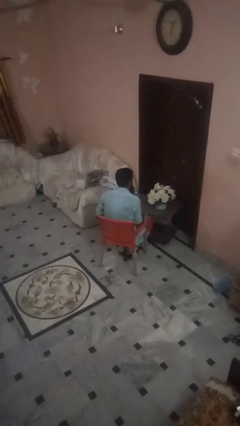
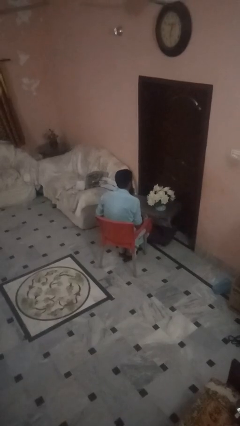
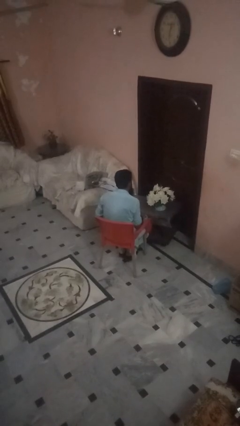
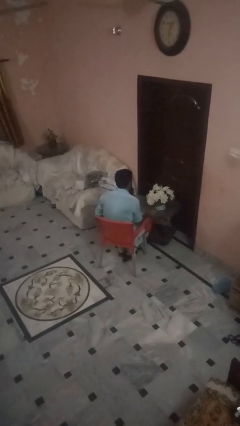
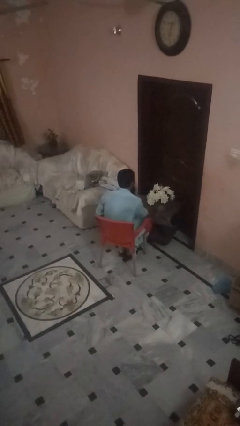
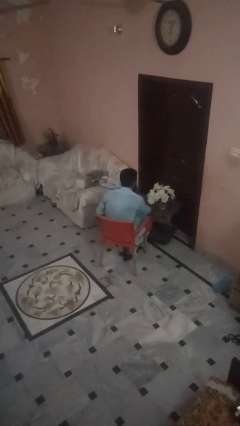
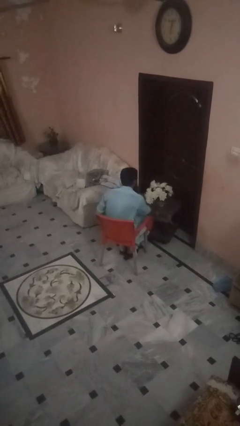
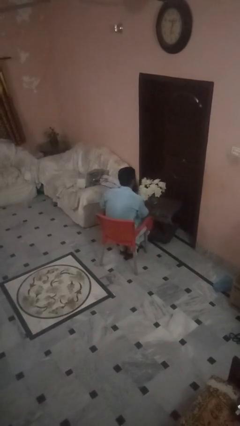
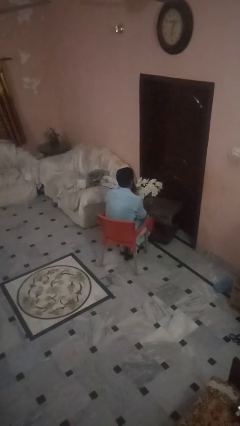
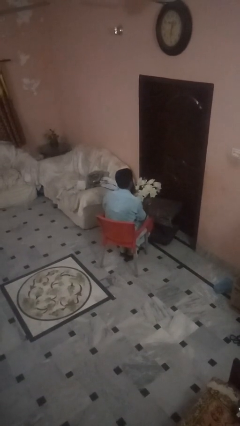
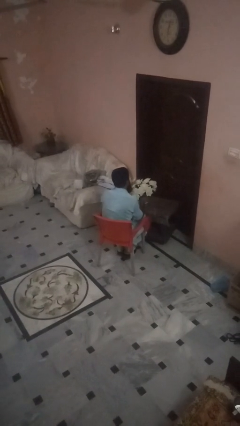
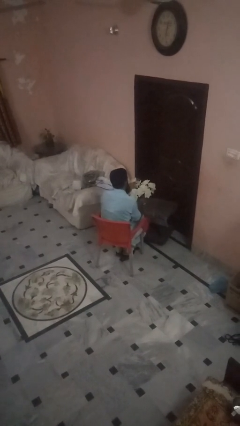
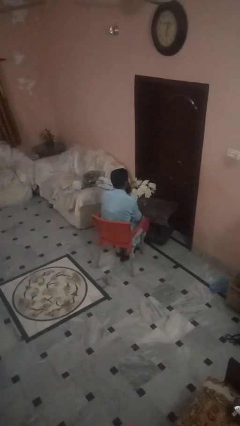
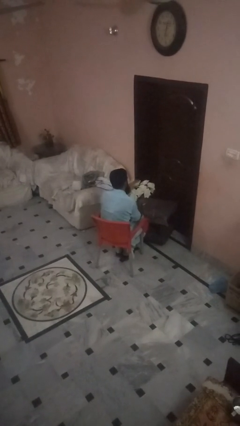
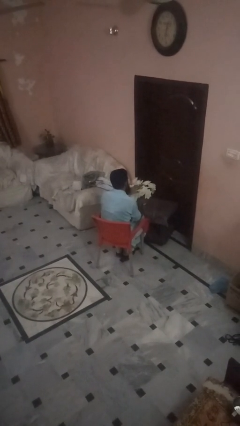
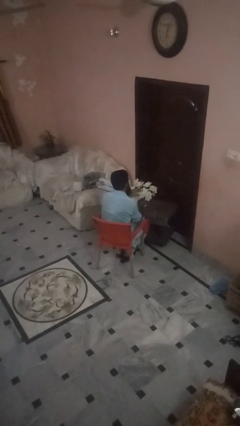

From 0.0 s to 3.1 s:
person arranges flowers in vase

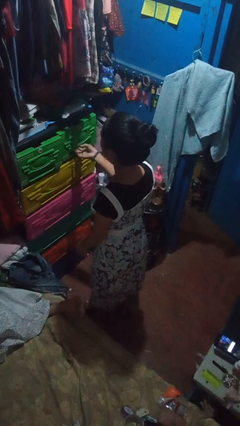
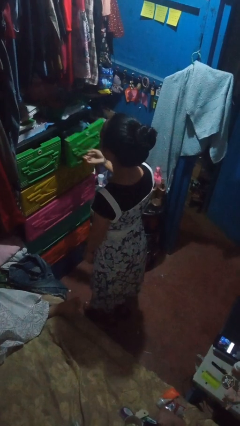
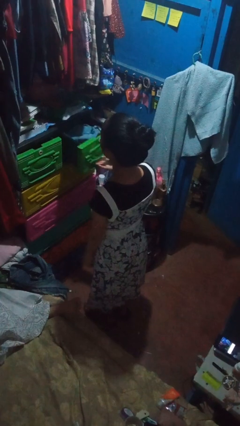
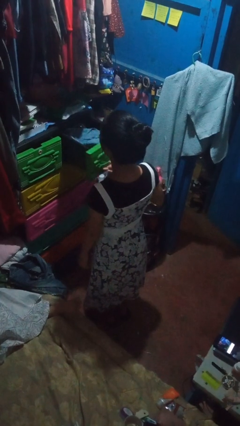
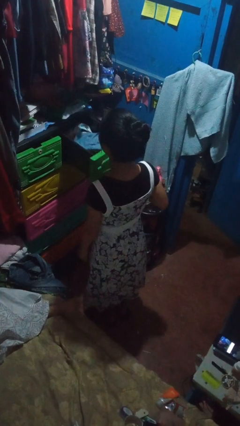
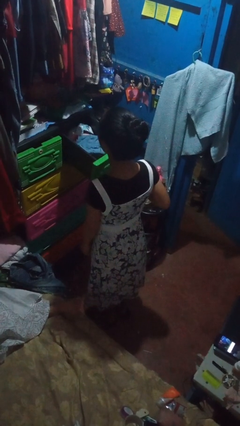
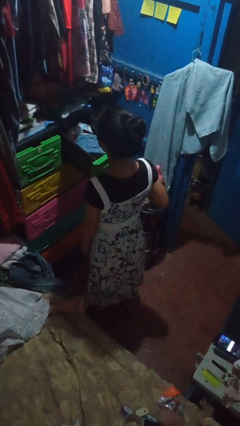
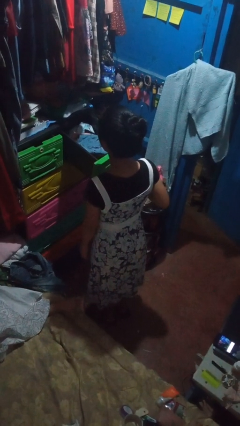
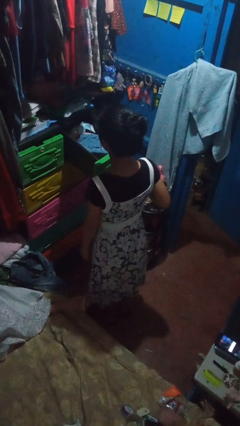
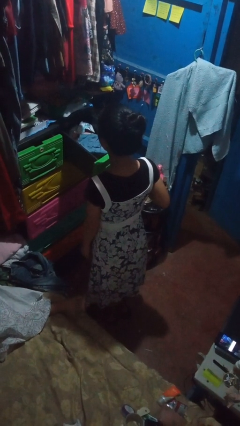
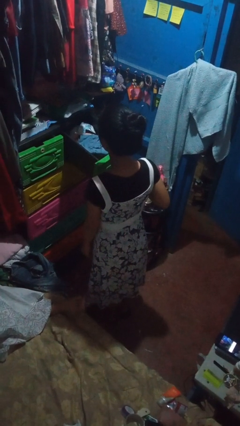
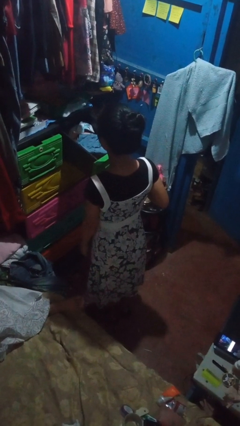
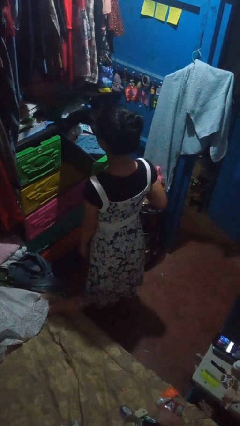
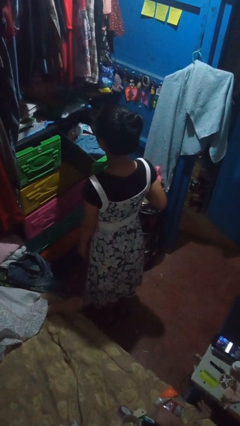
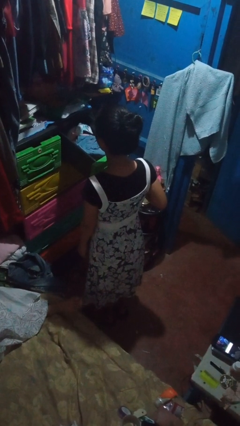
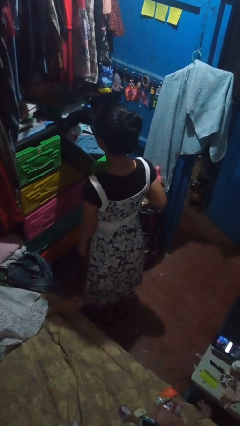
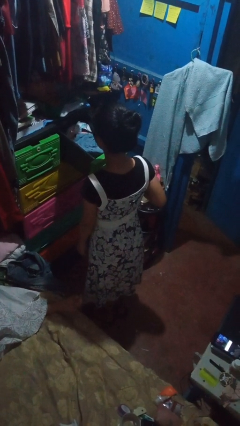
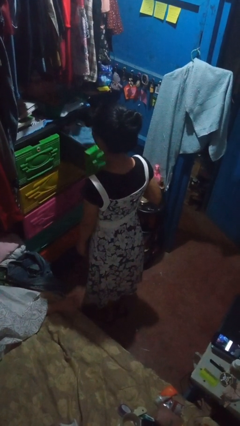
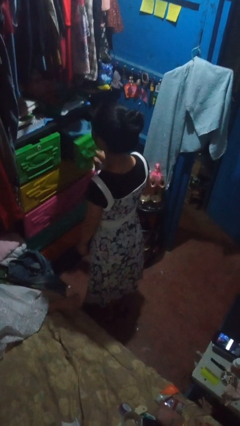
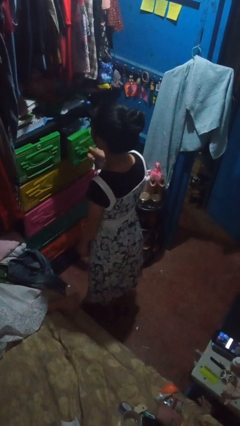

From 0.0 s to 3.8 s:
person opens dresser drawer

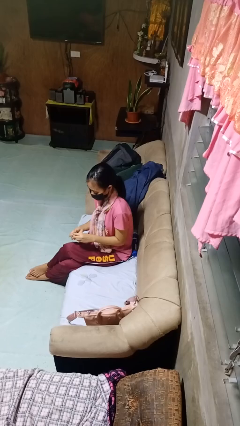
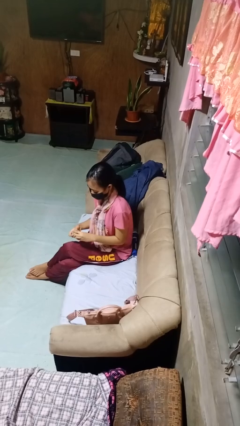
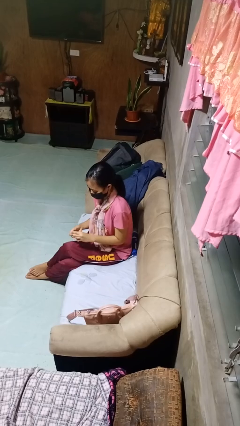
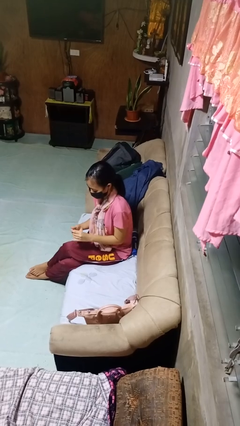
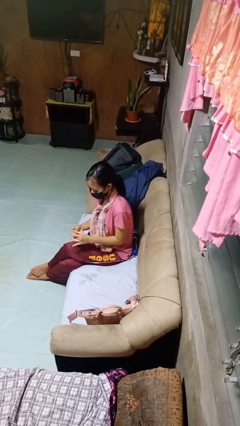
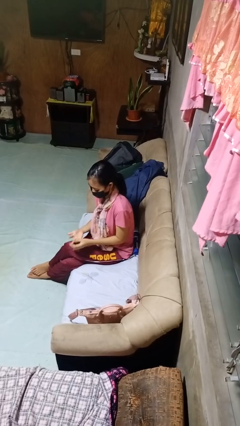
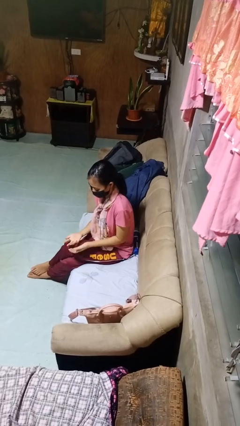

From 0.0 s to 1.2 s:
person puts on ring

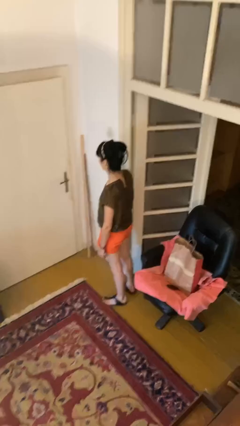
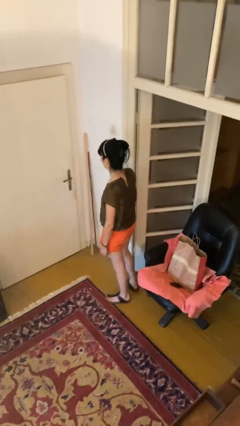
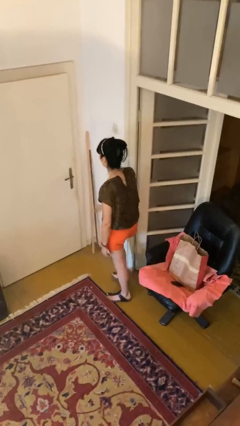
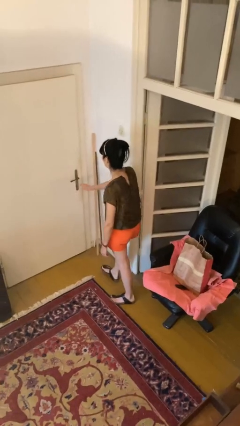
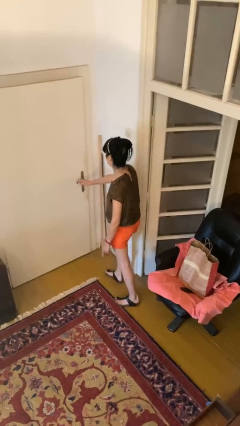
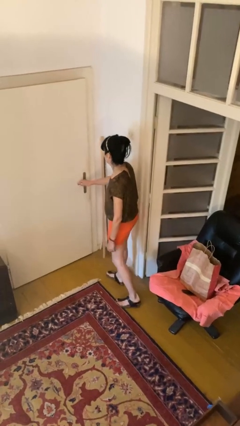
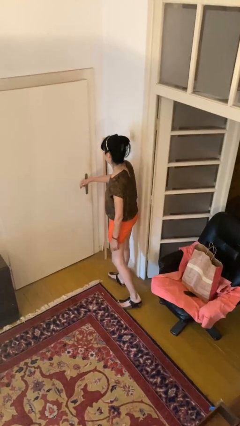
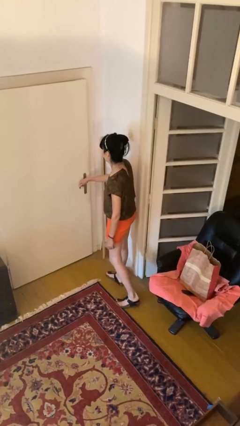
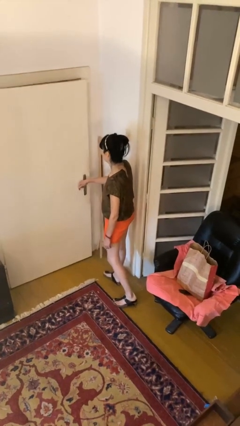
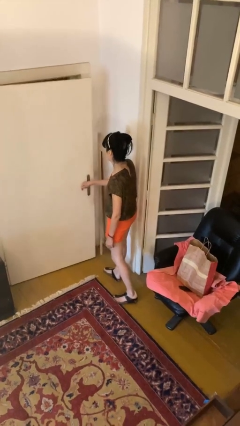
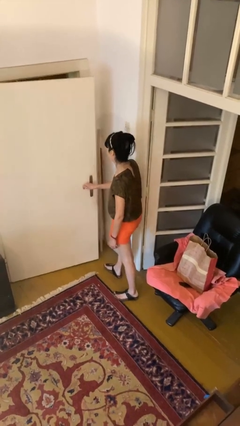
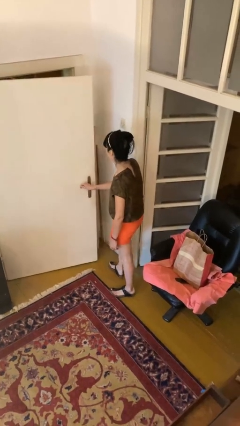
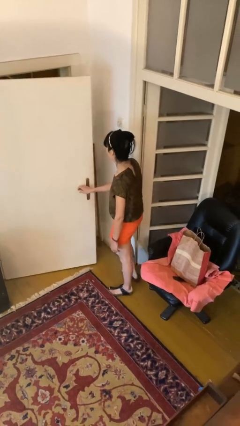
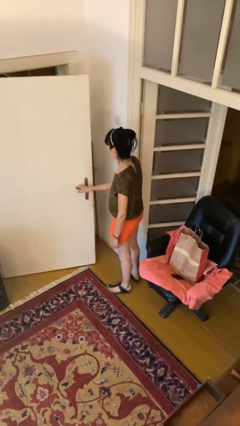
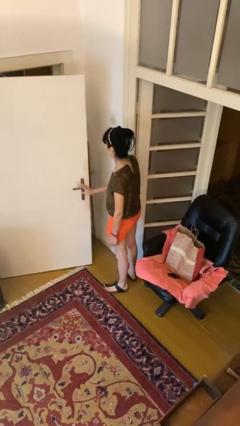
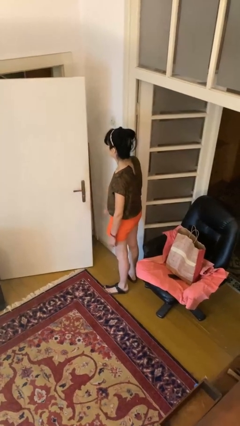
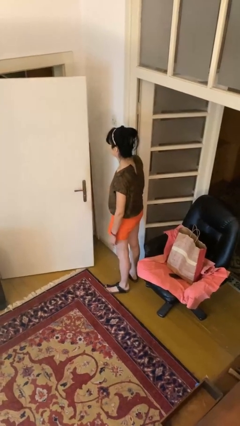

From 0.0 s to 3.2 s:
person opens facility door

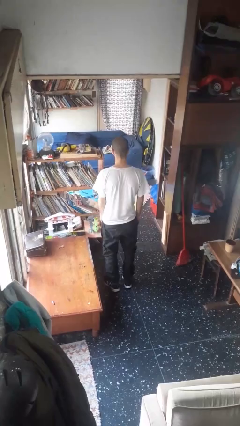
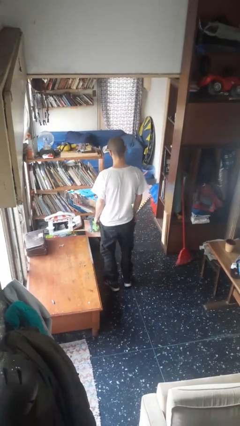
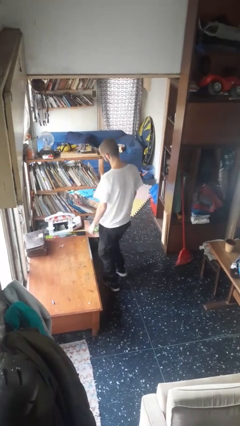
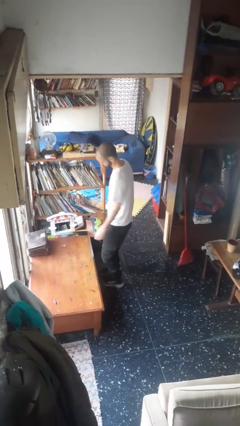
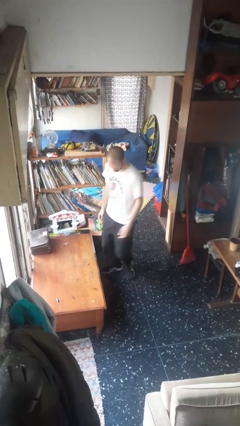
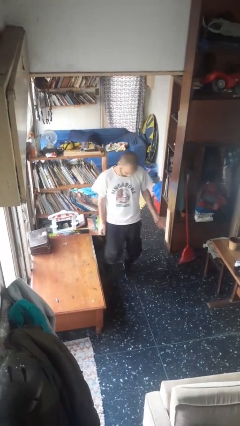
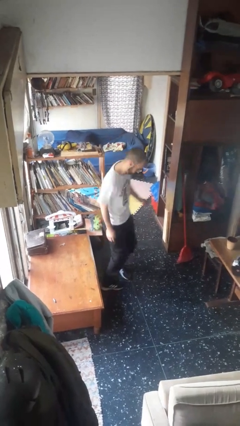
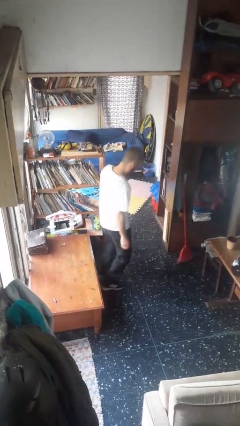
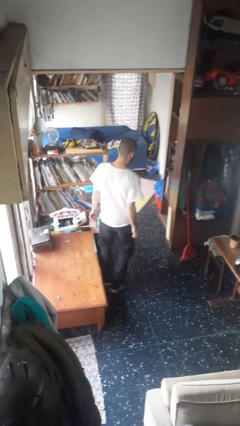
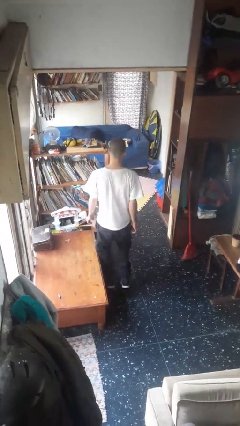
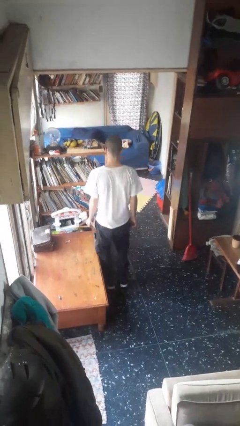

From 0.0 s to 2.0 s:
person twirls

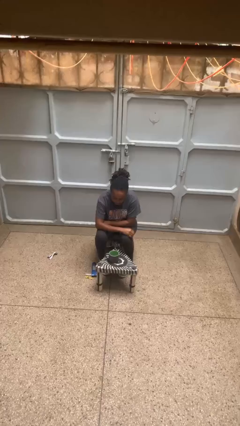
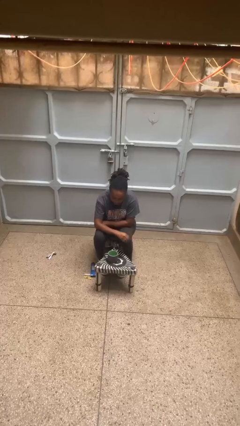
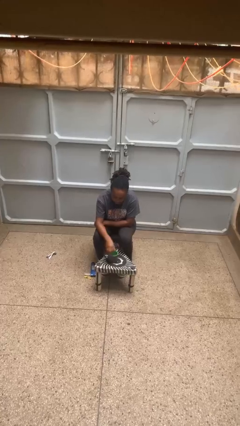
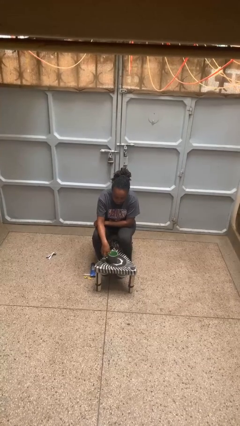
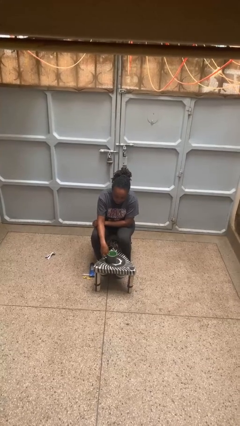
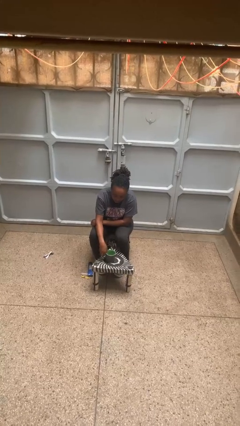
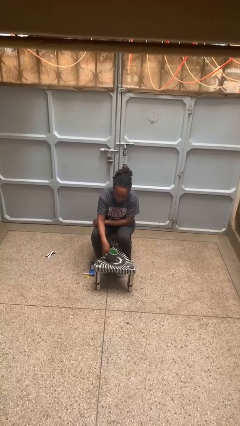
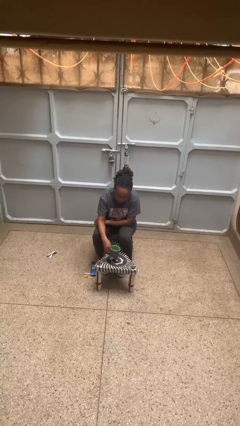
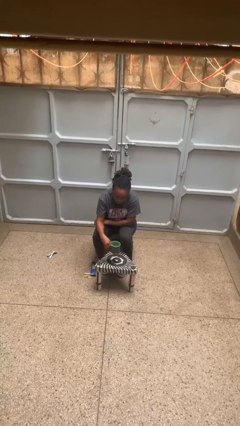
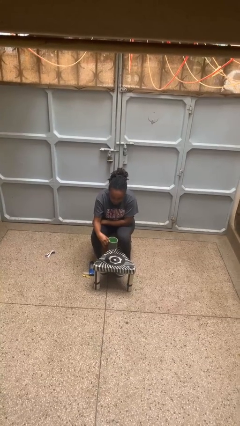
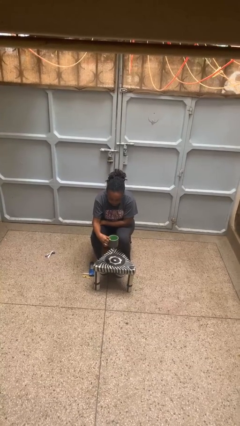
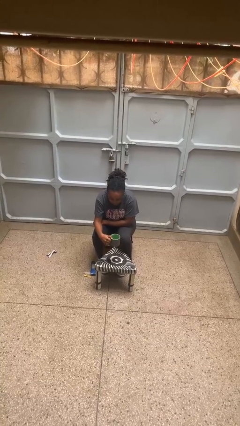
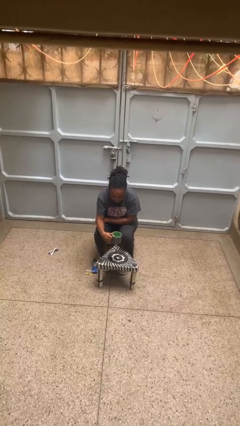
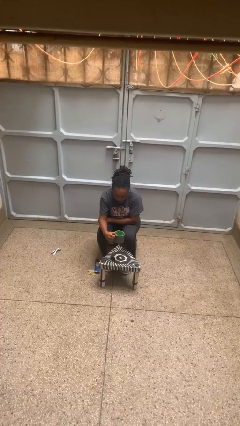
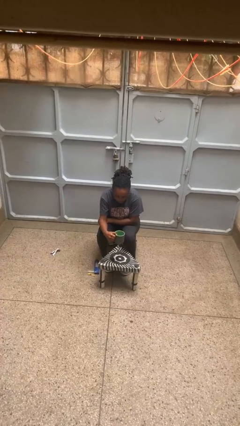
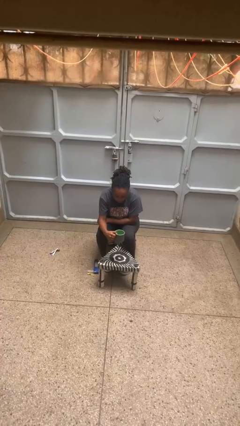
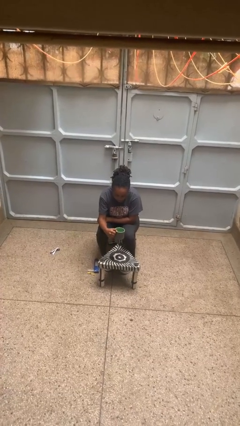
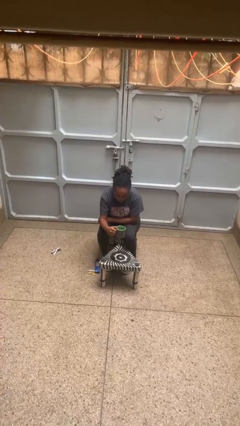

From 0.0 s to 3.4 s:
person picks up object from table

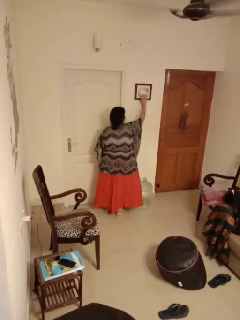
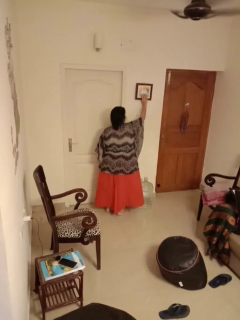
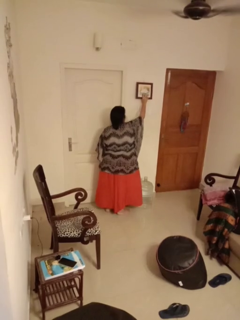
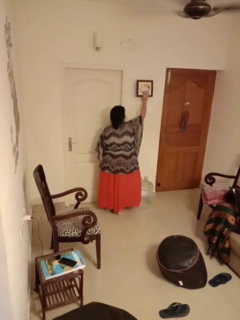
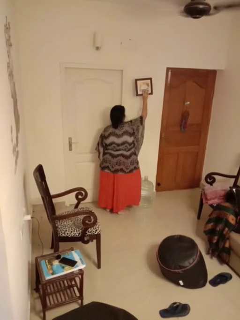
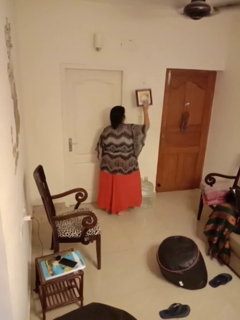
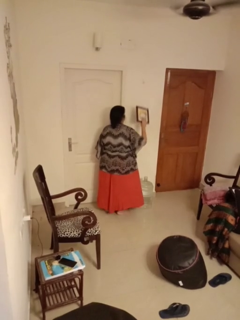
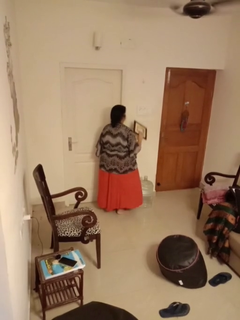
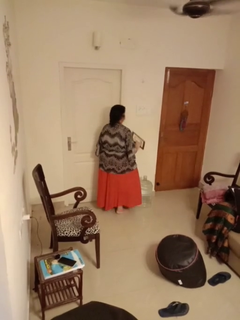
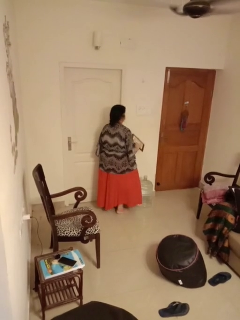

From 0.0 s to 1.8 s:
person takes down picture frame
